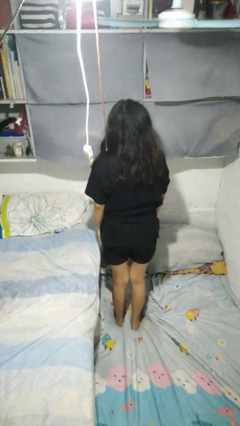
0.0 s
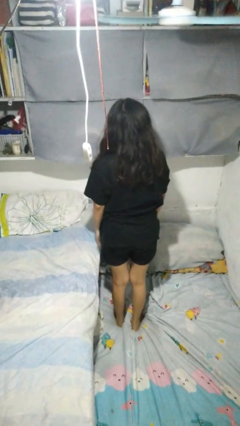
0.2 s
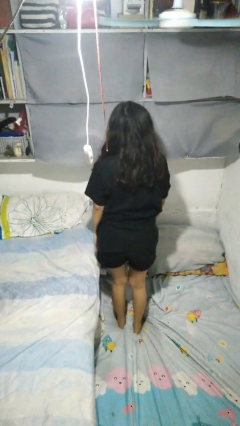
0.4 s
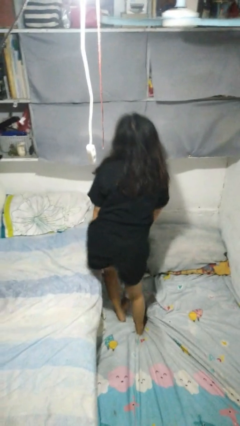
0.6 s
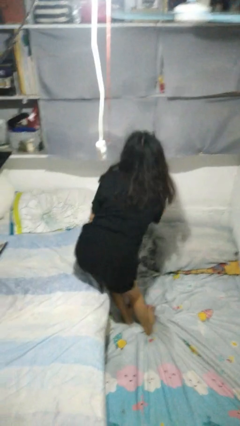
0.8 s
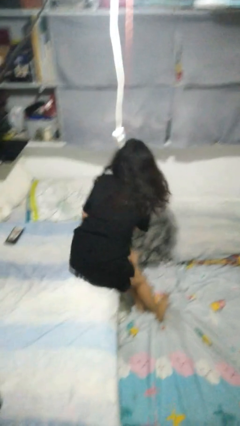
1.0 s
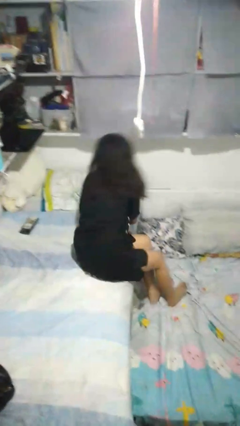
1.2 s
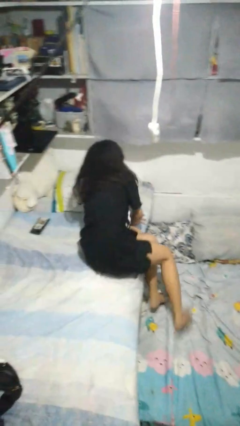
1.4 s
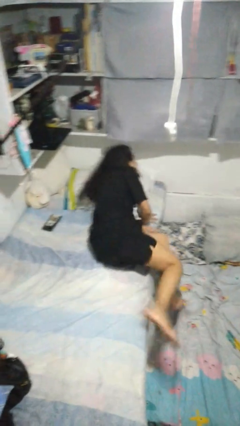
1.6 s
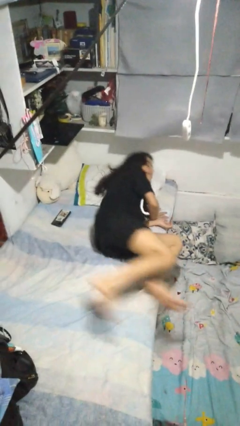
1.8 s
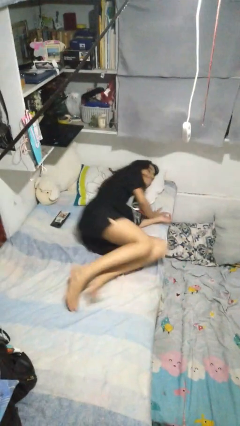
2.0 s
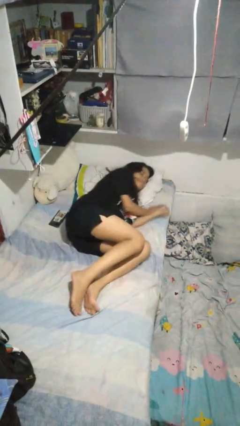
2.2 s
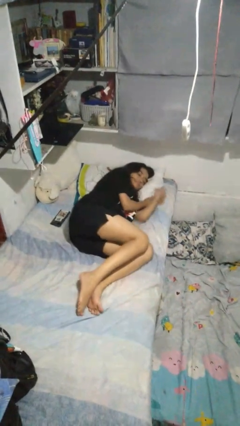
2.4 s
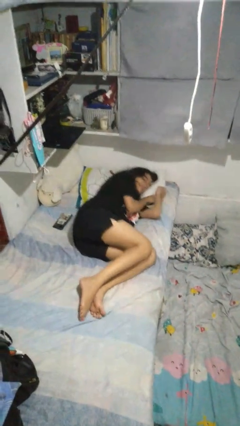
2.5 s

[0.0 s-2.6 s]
person lies down on bed

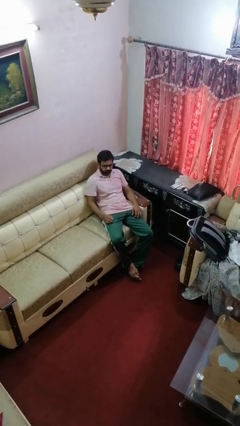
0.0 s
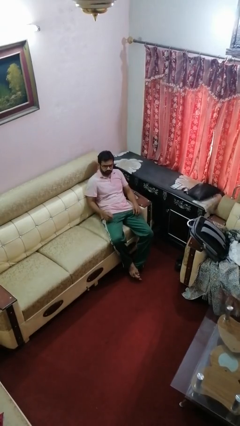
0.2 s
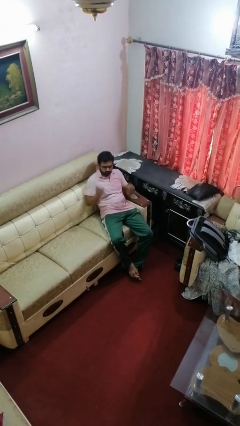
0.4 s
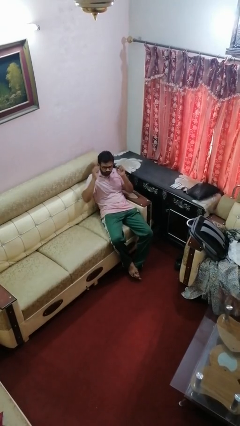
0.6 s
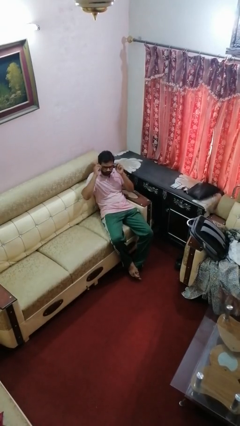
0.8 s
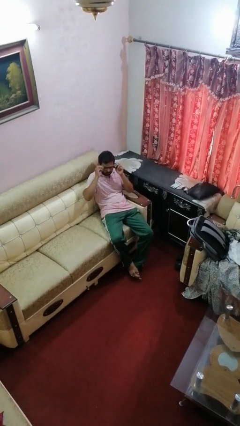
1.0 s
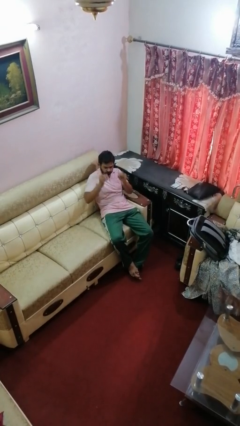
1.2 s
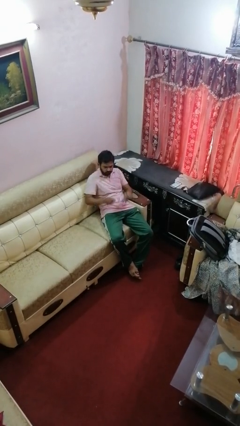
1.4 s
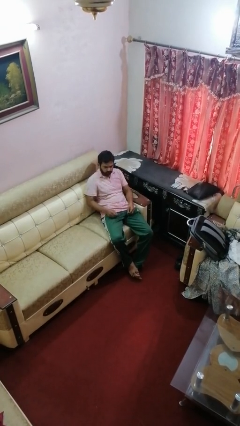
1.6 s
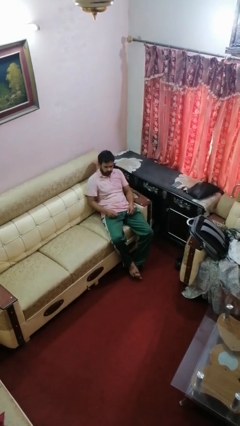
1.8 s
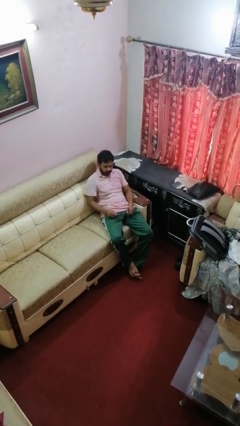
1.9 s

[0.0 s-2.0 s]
person takes off glasses

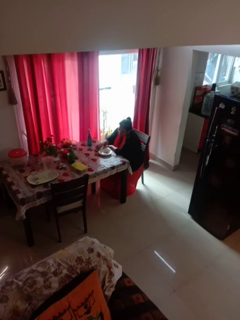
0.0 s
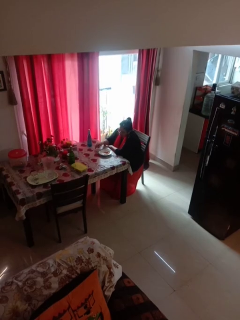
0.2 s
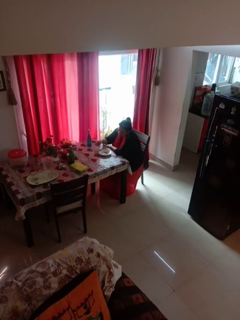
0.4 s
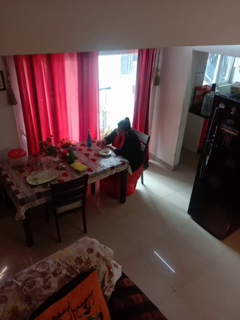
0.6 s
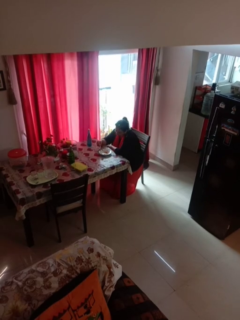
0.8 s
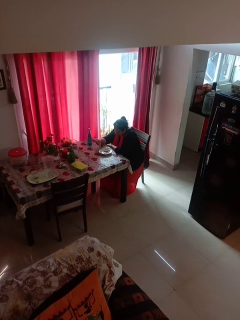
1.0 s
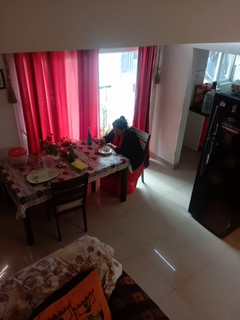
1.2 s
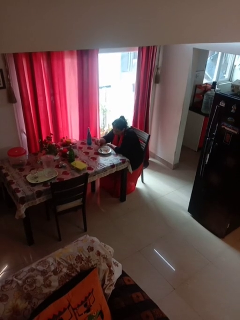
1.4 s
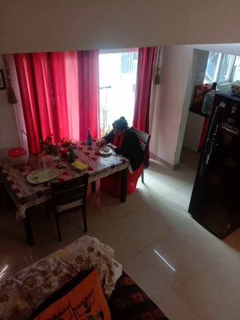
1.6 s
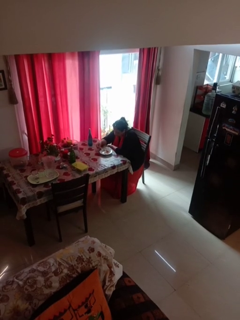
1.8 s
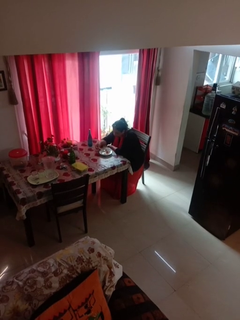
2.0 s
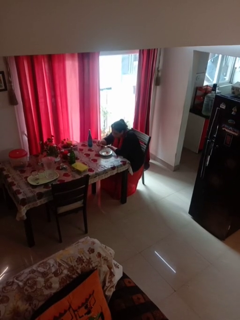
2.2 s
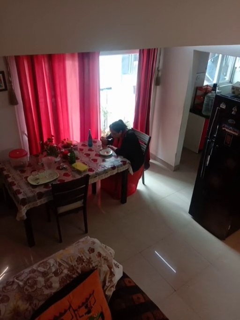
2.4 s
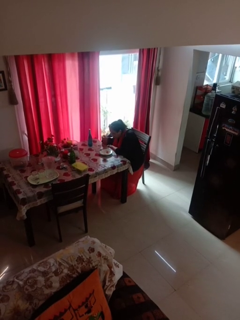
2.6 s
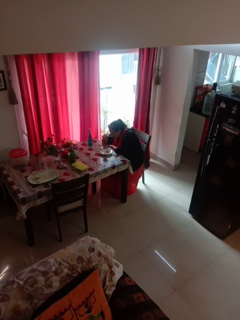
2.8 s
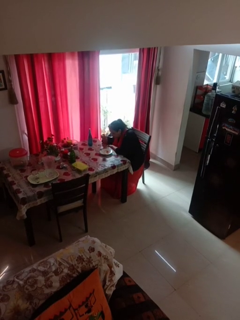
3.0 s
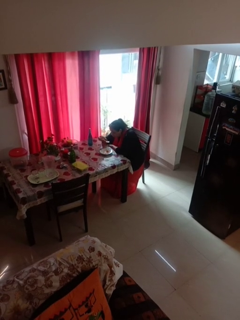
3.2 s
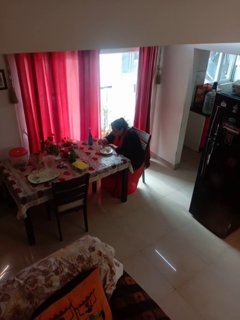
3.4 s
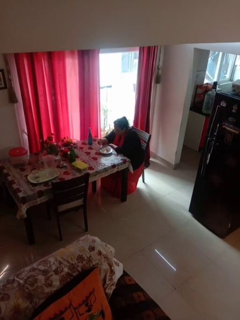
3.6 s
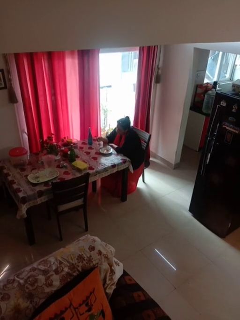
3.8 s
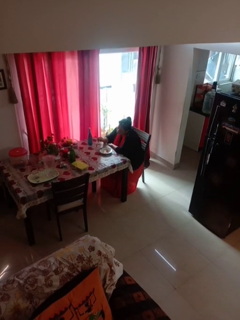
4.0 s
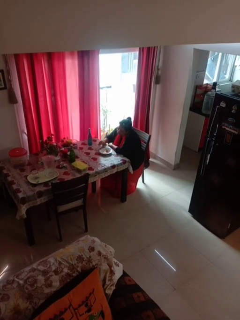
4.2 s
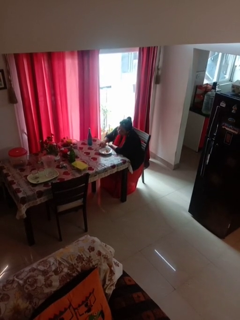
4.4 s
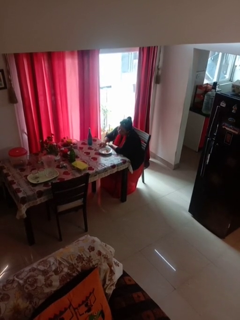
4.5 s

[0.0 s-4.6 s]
person eats with utensil

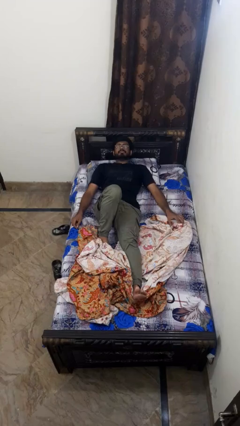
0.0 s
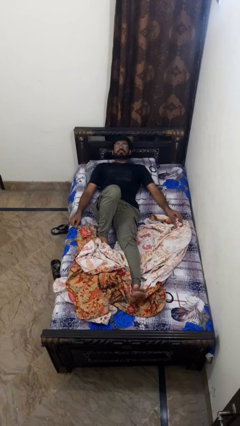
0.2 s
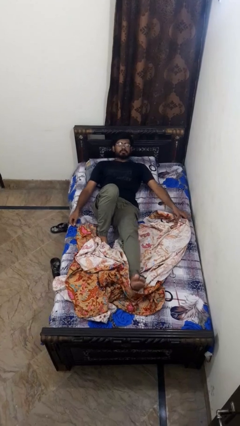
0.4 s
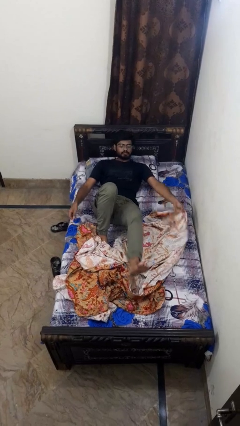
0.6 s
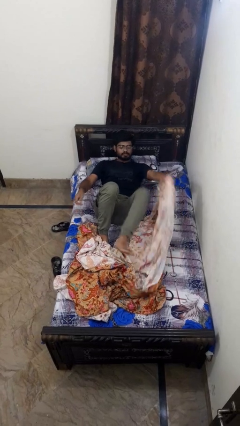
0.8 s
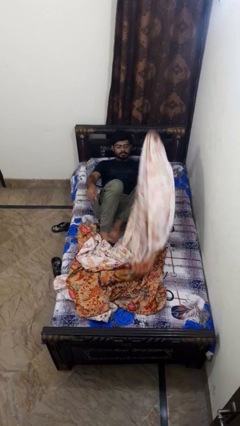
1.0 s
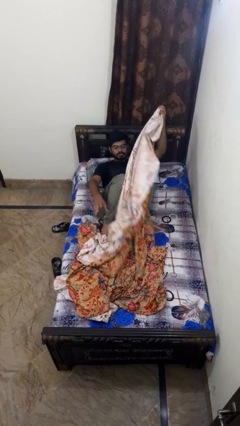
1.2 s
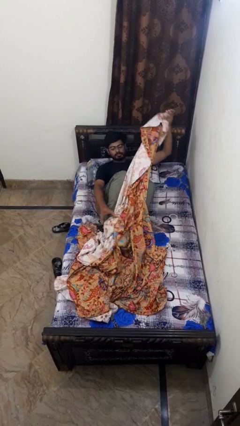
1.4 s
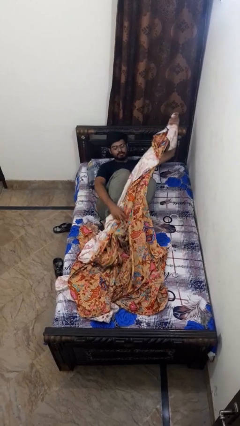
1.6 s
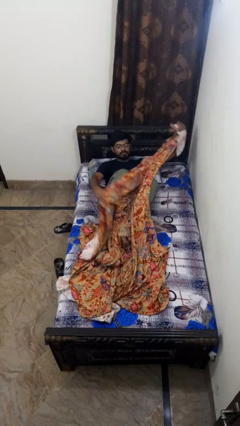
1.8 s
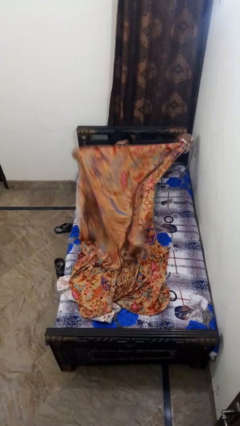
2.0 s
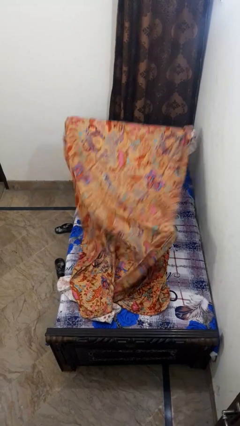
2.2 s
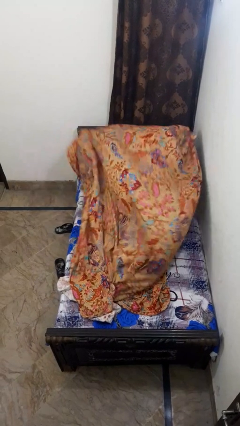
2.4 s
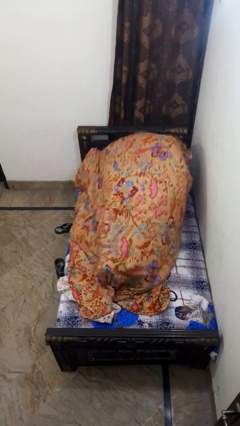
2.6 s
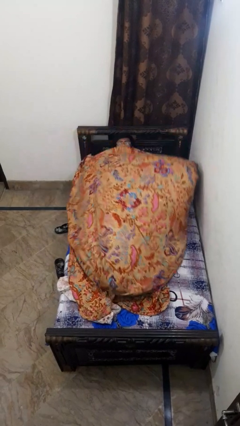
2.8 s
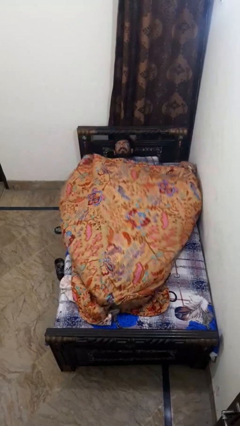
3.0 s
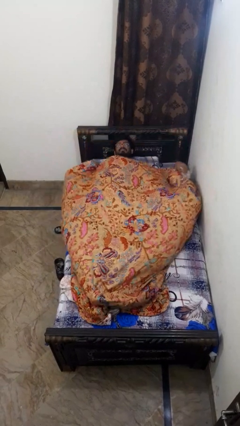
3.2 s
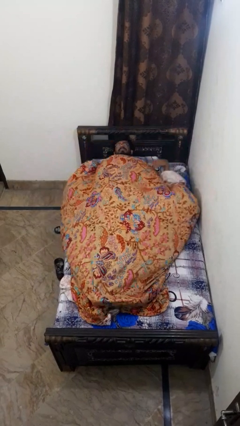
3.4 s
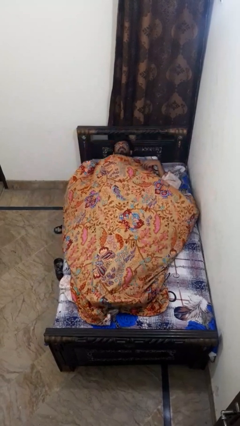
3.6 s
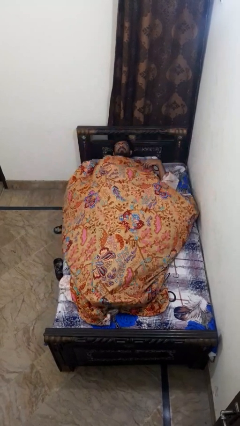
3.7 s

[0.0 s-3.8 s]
person covers with bedsheets

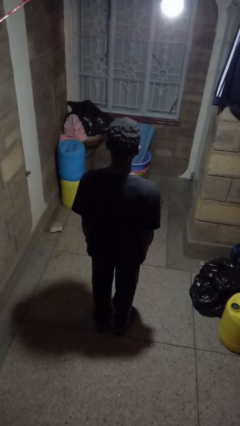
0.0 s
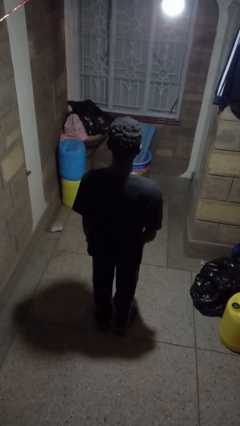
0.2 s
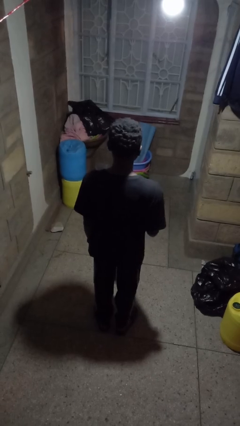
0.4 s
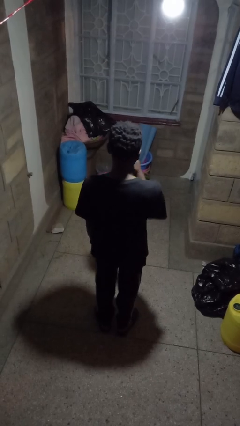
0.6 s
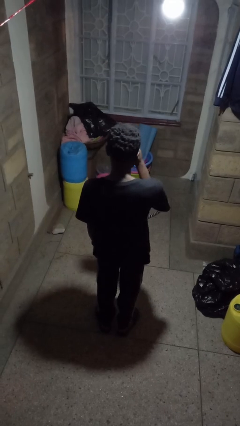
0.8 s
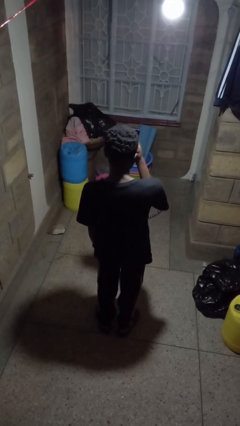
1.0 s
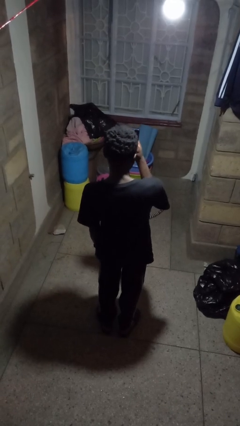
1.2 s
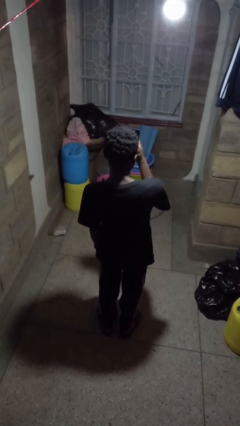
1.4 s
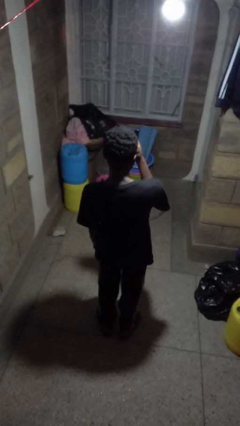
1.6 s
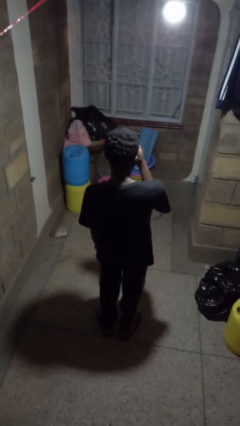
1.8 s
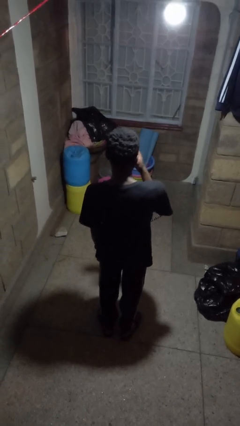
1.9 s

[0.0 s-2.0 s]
person takes selfie

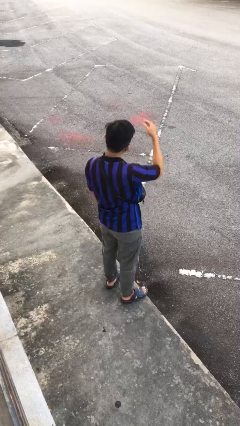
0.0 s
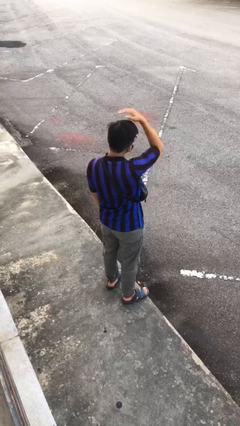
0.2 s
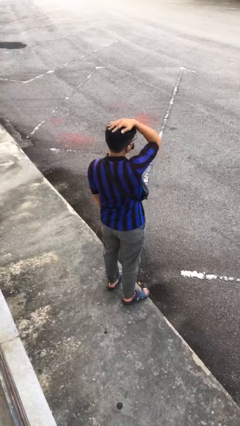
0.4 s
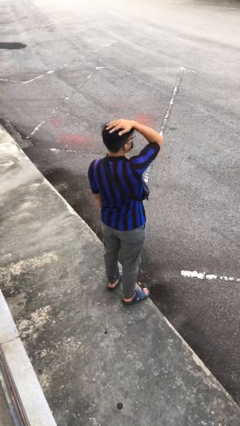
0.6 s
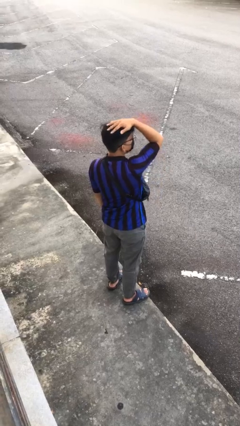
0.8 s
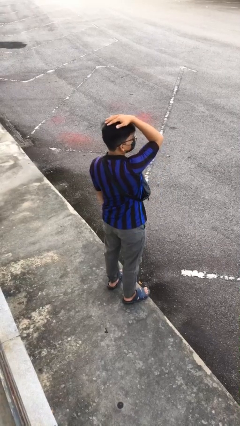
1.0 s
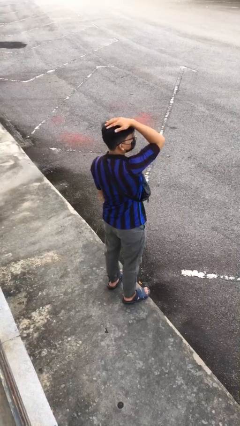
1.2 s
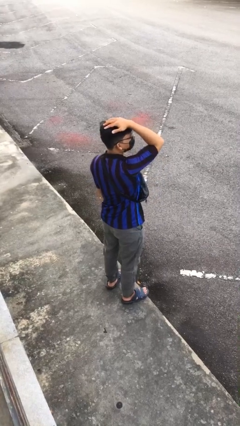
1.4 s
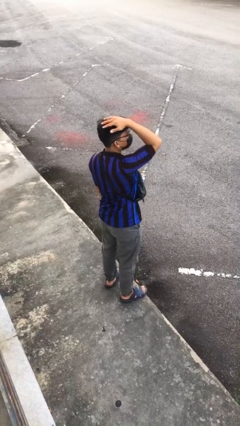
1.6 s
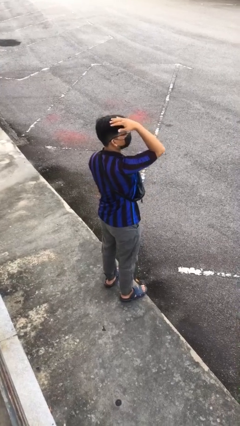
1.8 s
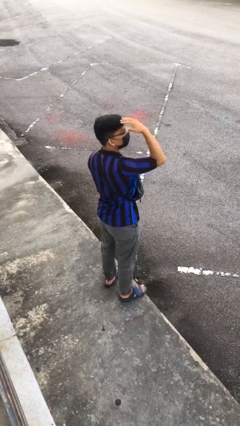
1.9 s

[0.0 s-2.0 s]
person pats head

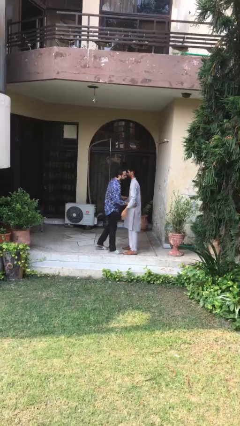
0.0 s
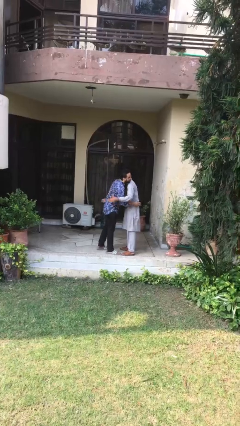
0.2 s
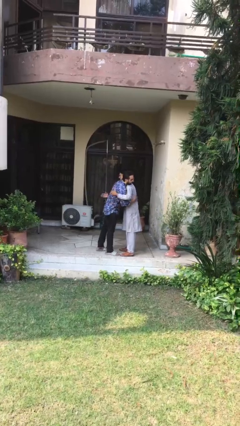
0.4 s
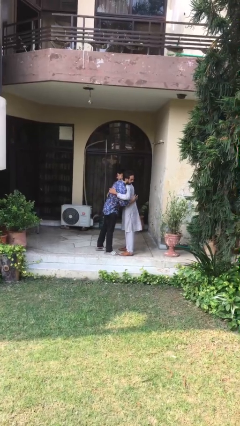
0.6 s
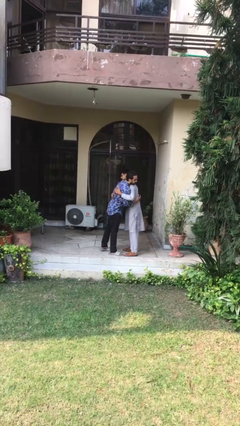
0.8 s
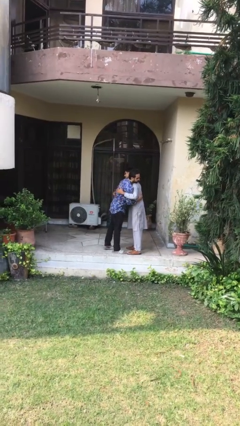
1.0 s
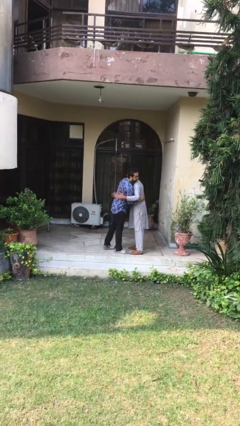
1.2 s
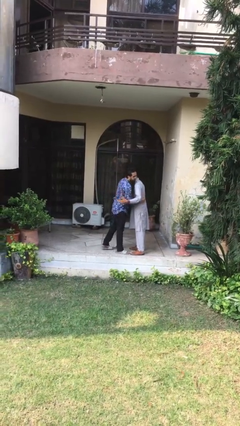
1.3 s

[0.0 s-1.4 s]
person embraces person

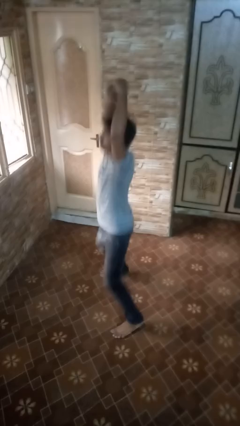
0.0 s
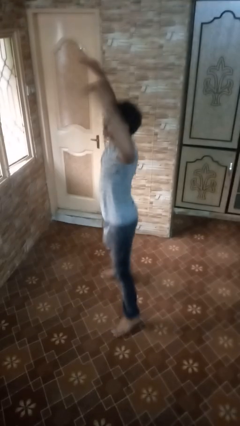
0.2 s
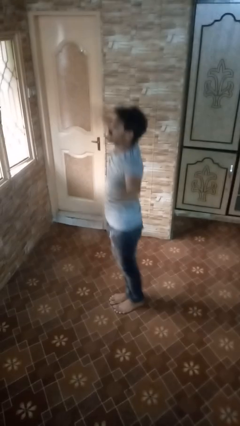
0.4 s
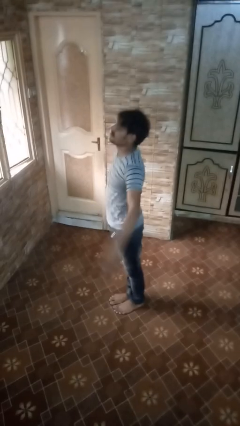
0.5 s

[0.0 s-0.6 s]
person exercises with jumping jacks
